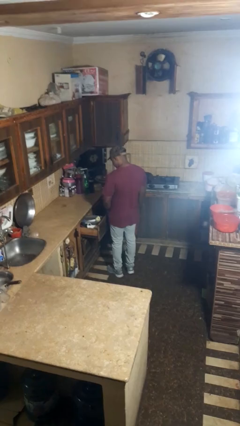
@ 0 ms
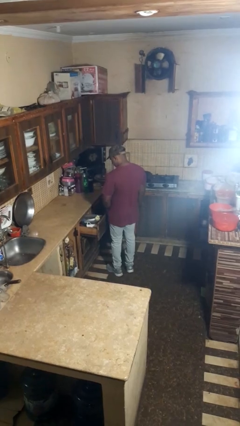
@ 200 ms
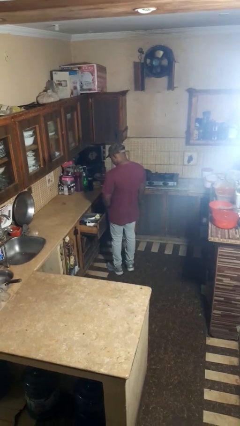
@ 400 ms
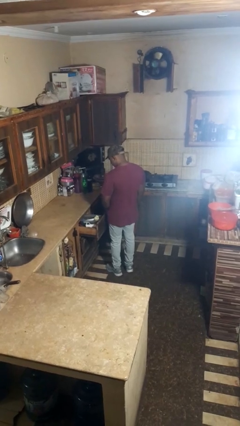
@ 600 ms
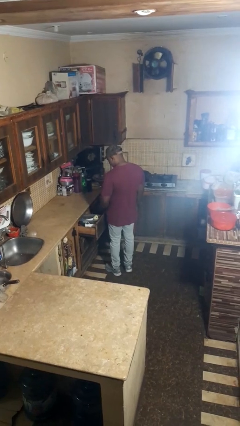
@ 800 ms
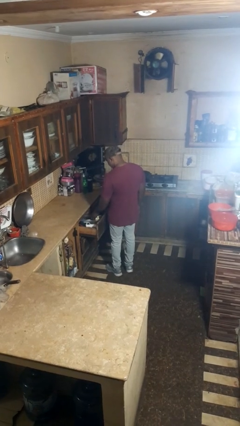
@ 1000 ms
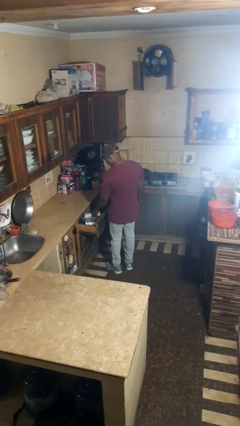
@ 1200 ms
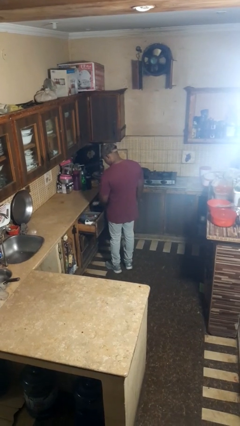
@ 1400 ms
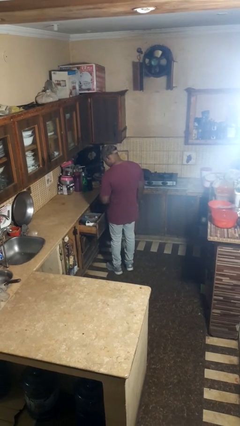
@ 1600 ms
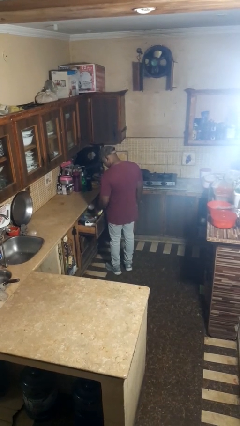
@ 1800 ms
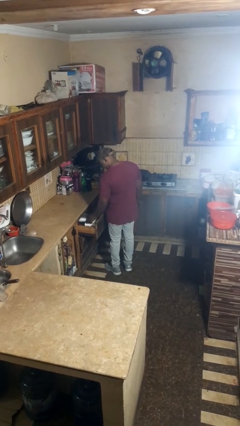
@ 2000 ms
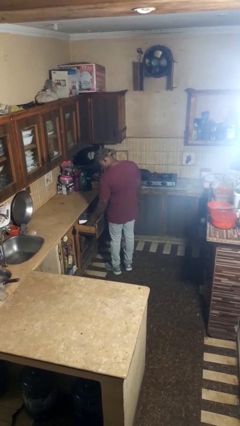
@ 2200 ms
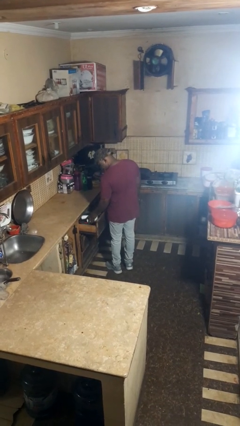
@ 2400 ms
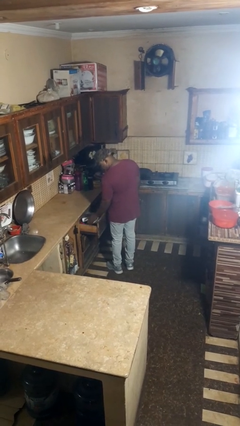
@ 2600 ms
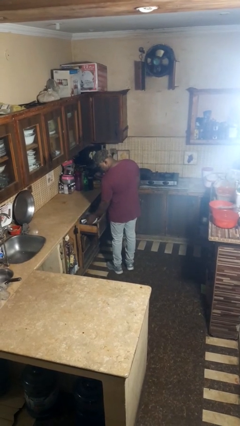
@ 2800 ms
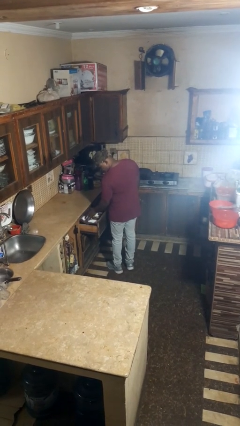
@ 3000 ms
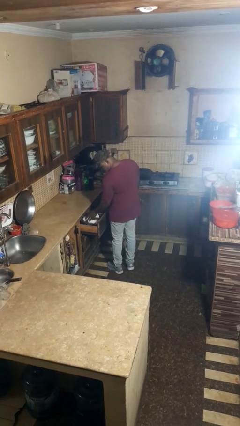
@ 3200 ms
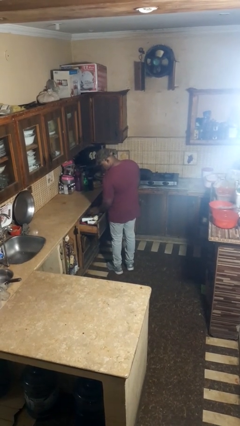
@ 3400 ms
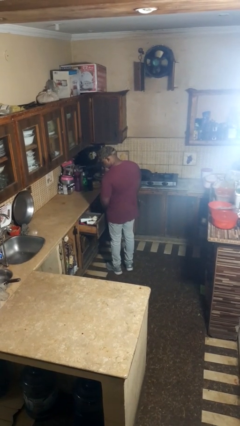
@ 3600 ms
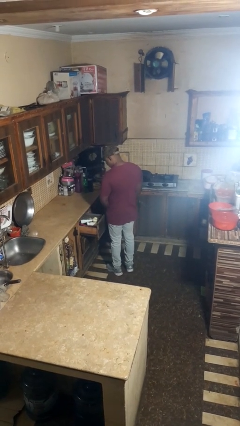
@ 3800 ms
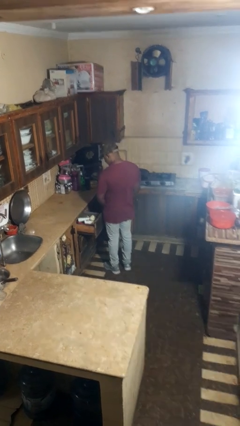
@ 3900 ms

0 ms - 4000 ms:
person searches in kitchen drawer

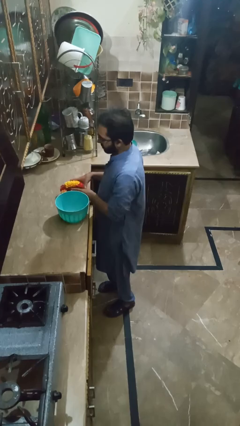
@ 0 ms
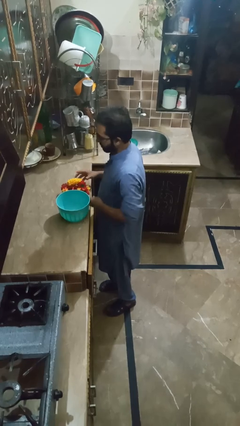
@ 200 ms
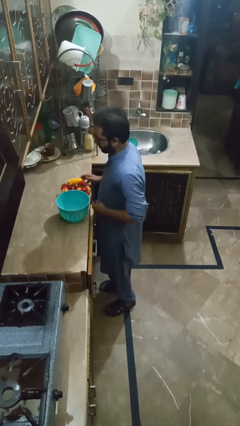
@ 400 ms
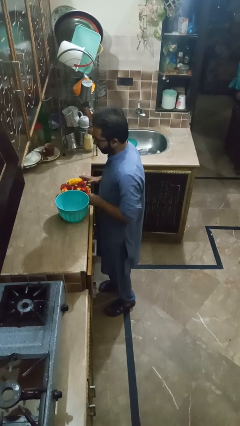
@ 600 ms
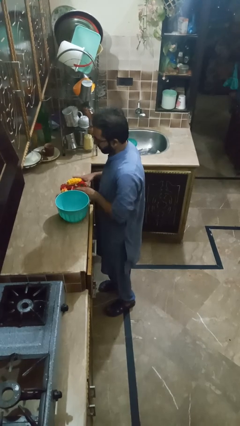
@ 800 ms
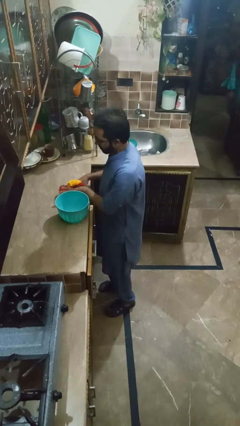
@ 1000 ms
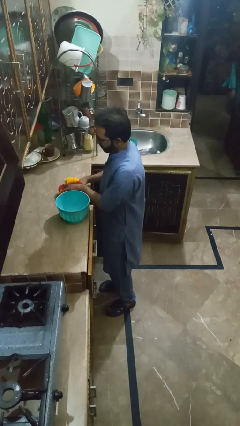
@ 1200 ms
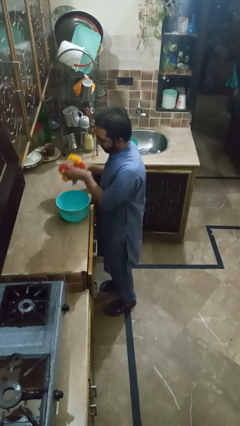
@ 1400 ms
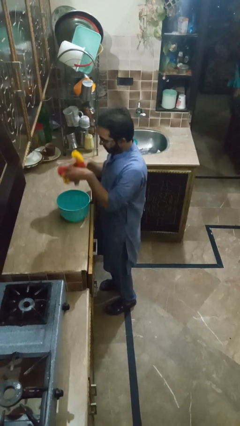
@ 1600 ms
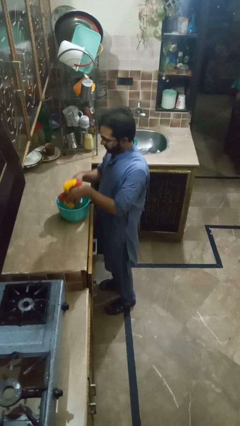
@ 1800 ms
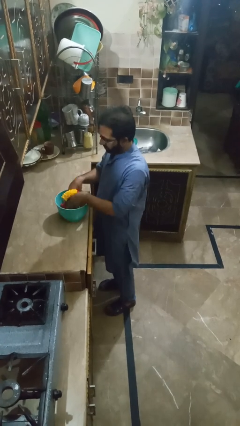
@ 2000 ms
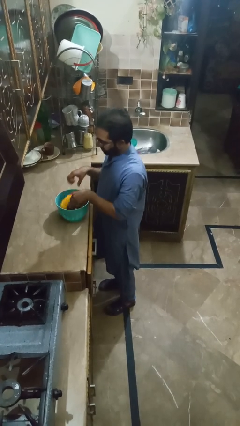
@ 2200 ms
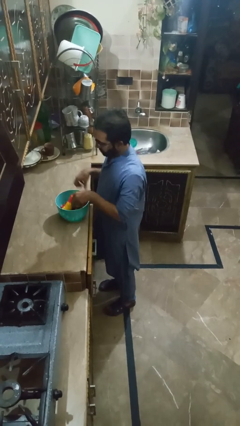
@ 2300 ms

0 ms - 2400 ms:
person pours into bowl

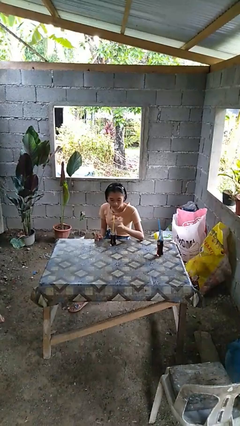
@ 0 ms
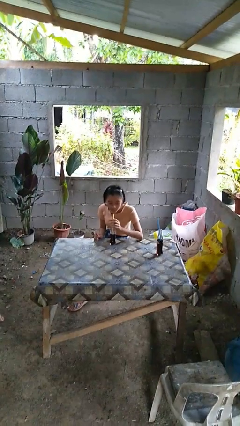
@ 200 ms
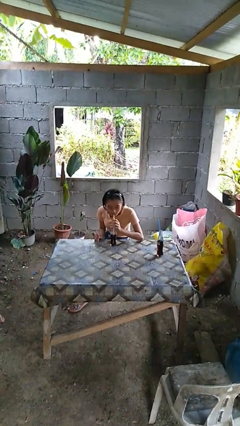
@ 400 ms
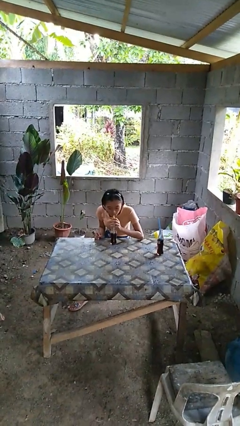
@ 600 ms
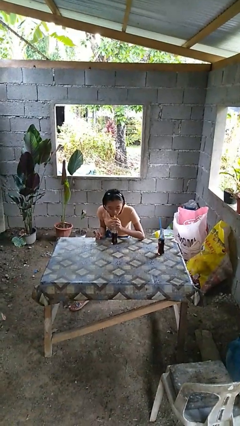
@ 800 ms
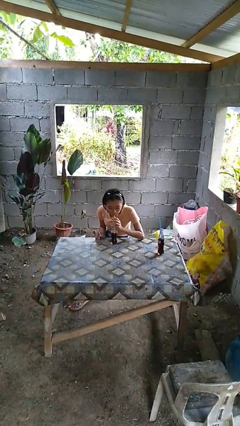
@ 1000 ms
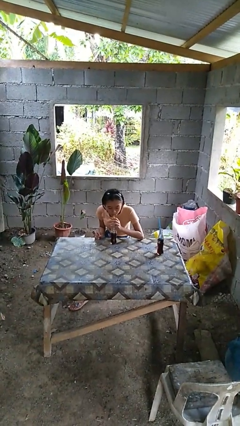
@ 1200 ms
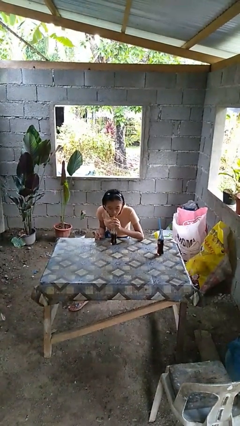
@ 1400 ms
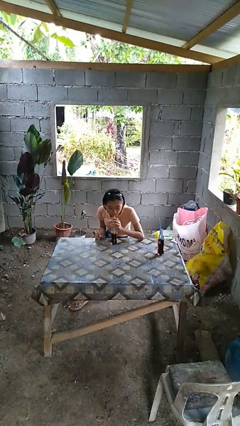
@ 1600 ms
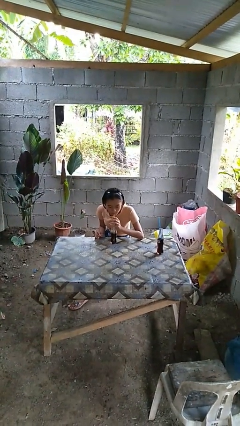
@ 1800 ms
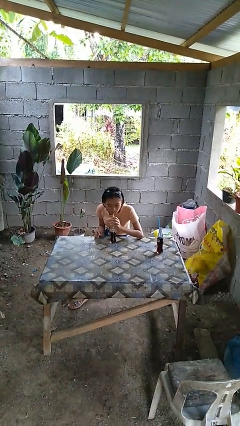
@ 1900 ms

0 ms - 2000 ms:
person drinks from straw

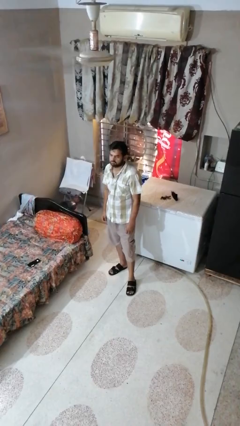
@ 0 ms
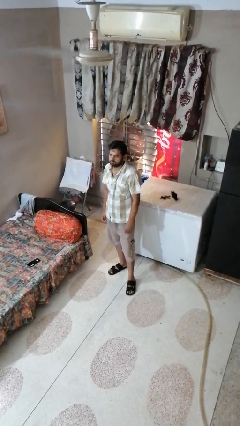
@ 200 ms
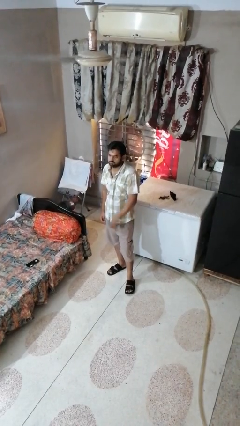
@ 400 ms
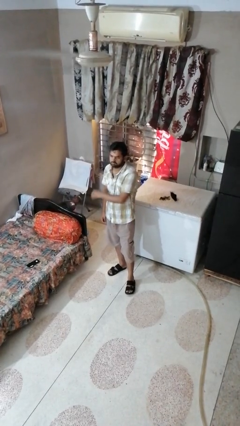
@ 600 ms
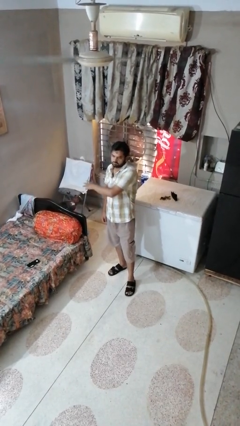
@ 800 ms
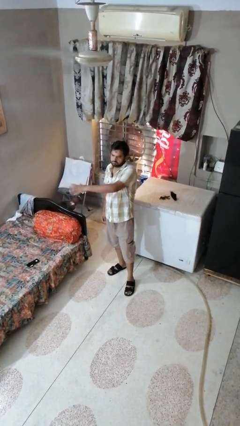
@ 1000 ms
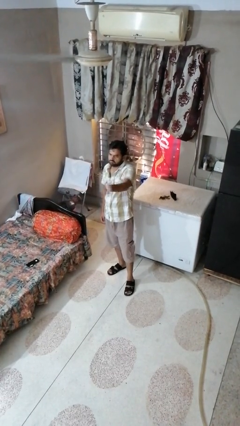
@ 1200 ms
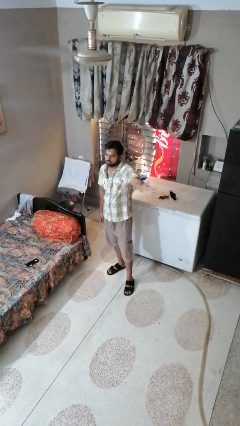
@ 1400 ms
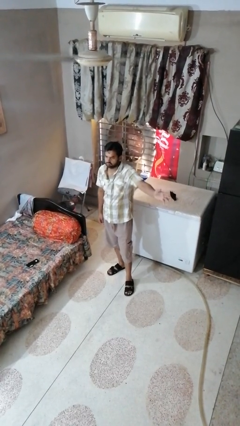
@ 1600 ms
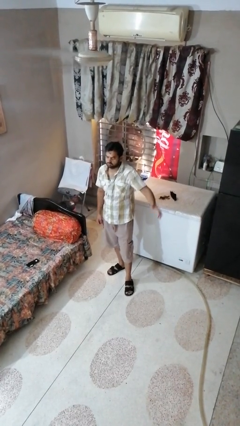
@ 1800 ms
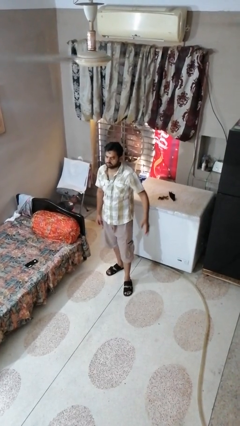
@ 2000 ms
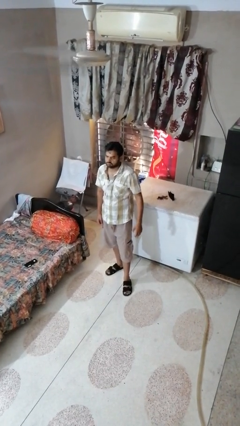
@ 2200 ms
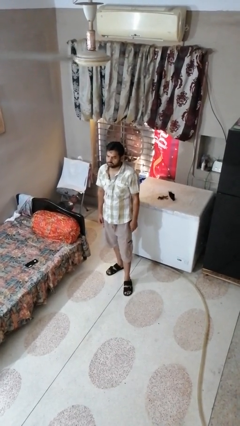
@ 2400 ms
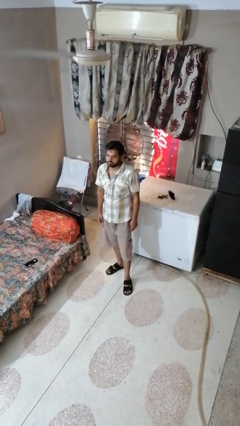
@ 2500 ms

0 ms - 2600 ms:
person gestures swipe left

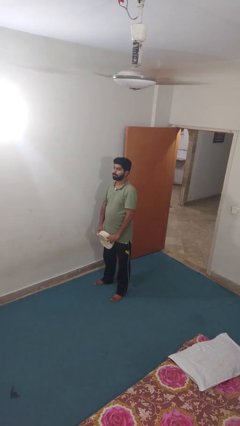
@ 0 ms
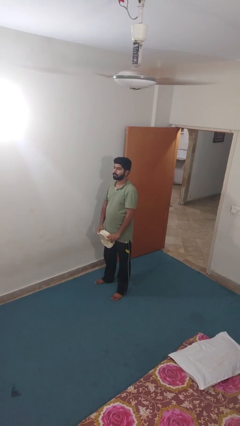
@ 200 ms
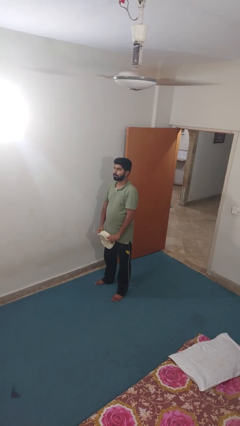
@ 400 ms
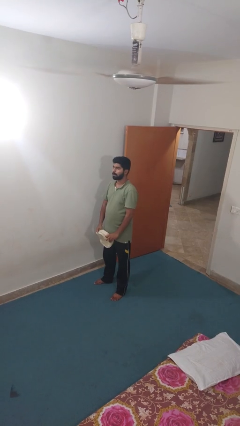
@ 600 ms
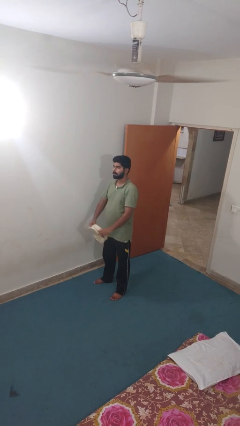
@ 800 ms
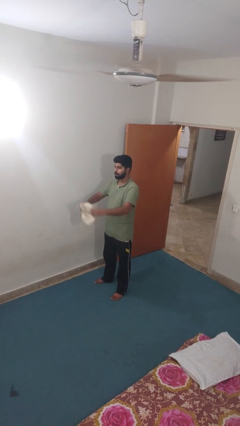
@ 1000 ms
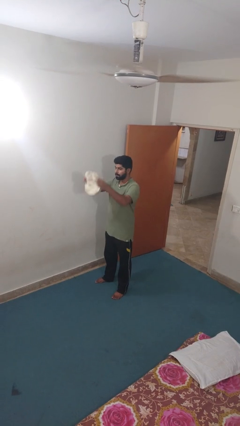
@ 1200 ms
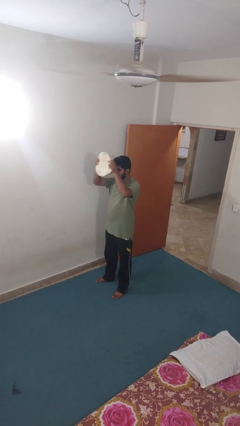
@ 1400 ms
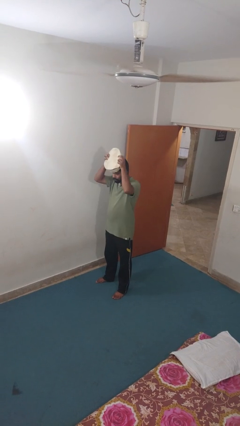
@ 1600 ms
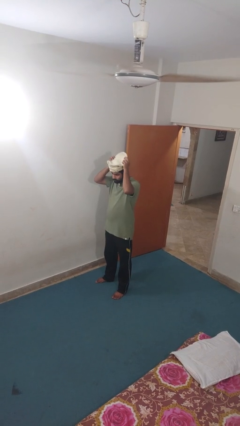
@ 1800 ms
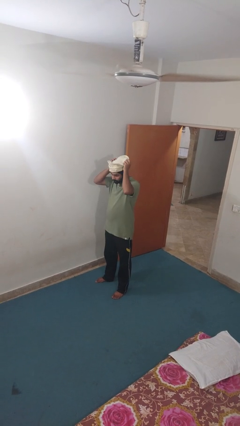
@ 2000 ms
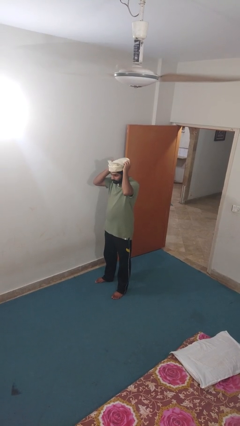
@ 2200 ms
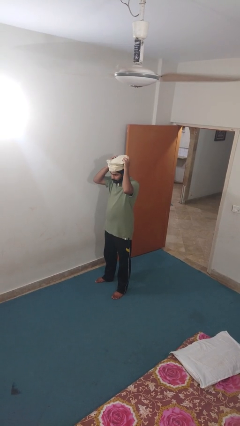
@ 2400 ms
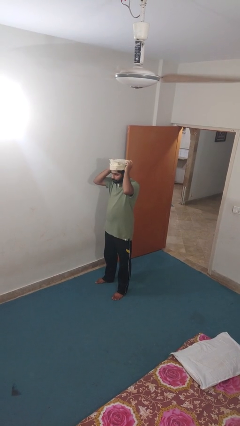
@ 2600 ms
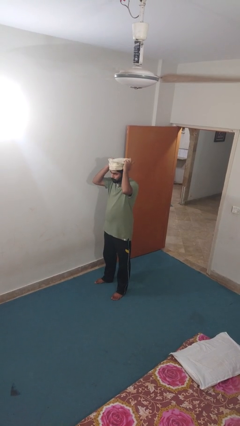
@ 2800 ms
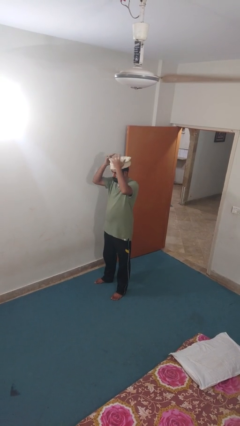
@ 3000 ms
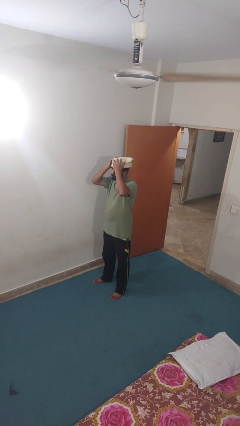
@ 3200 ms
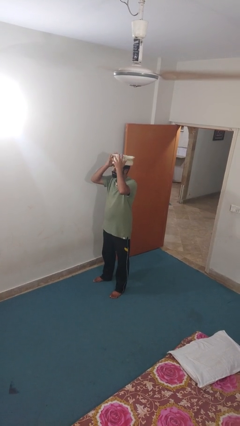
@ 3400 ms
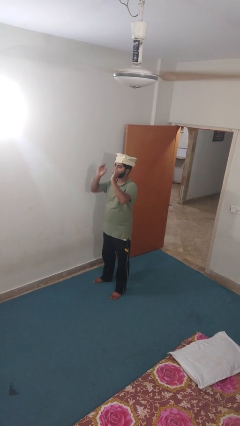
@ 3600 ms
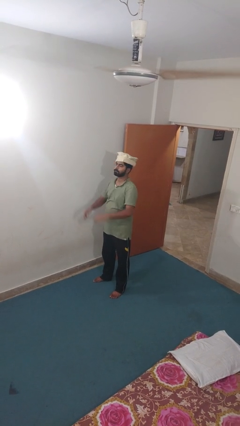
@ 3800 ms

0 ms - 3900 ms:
person puts on hat

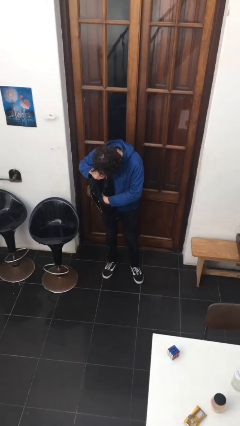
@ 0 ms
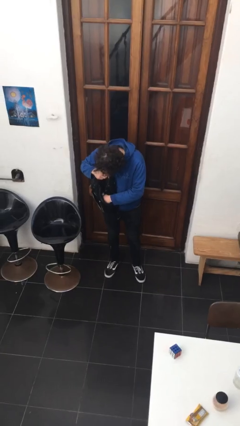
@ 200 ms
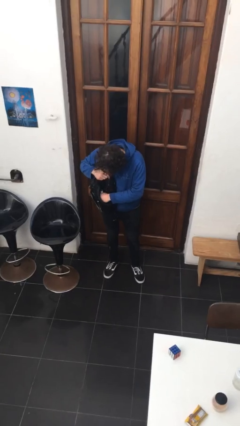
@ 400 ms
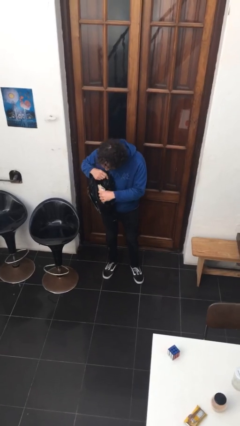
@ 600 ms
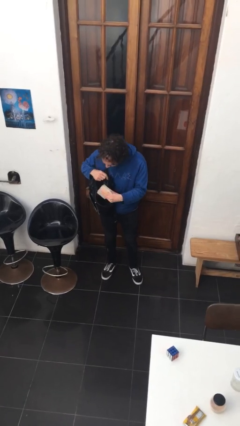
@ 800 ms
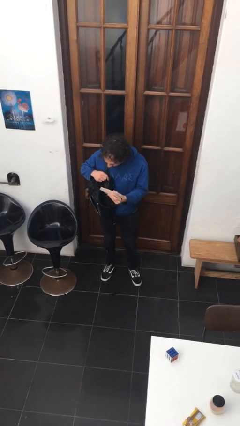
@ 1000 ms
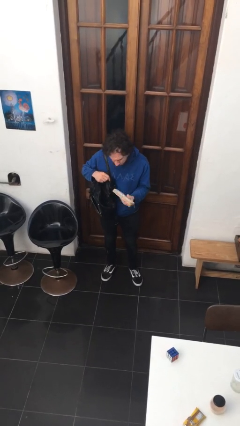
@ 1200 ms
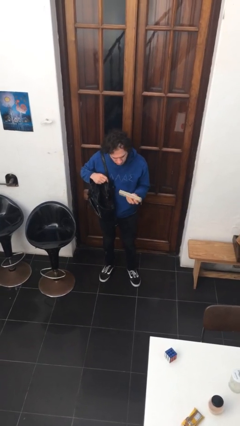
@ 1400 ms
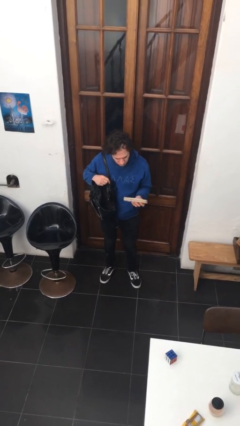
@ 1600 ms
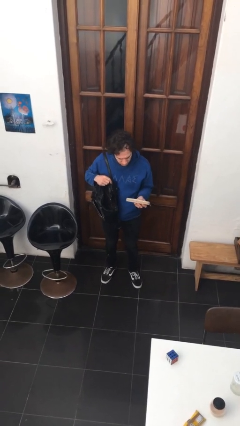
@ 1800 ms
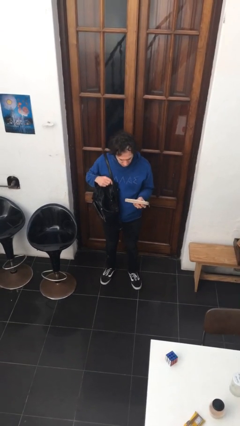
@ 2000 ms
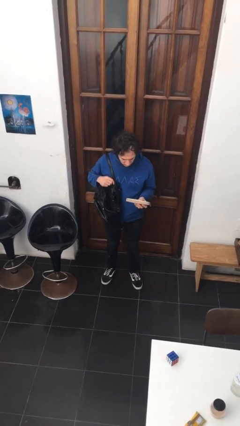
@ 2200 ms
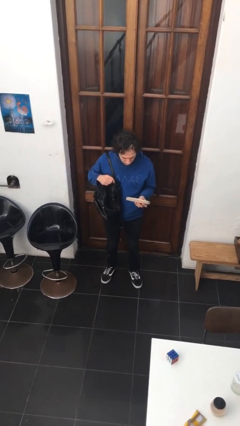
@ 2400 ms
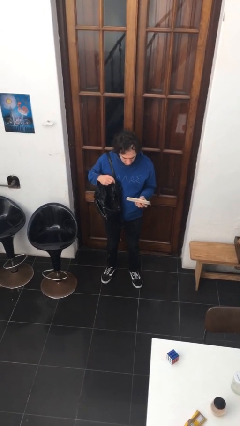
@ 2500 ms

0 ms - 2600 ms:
person takes object from purse

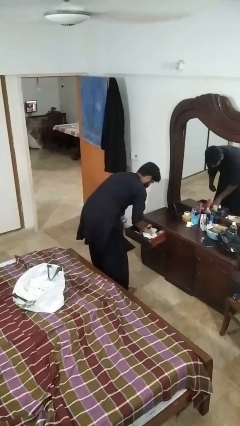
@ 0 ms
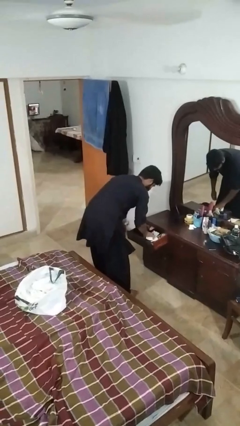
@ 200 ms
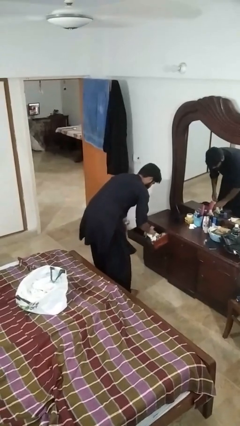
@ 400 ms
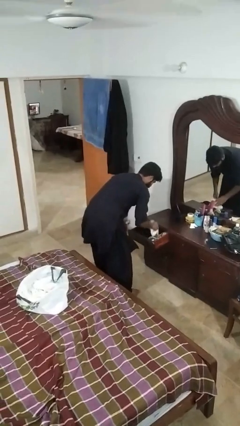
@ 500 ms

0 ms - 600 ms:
person takes clothes from dresser
